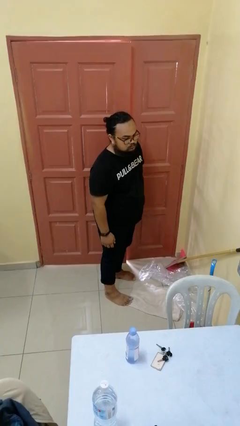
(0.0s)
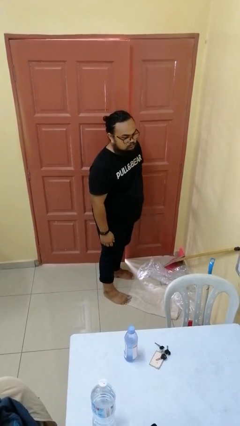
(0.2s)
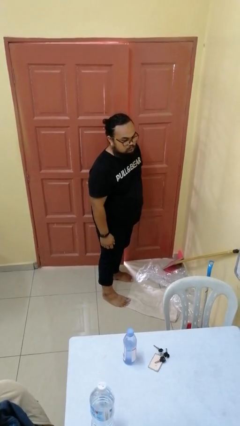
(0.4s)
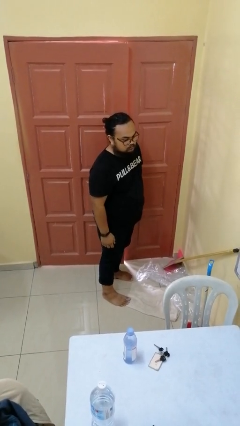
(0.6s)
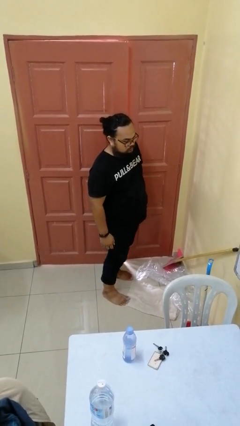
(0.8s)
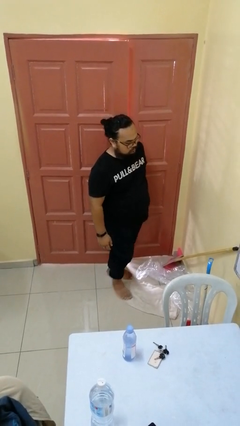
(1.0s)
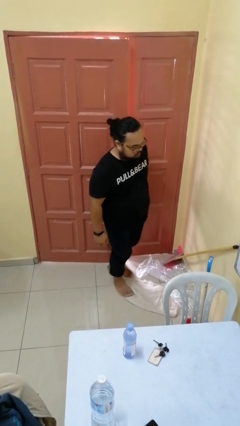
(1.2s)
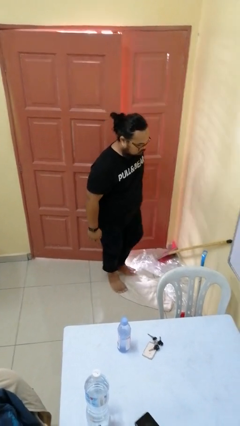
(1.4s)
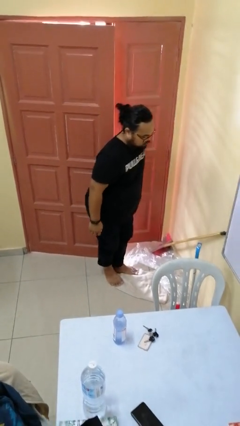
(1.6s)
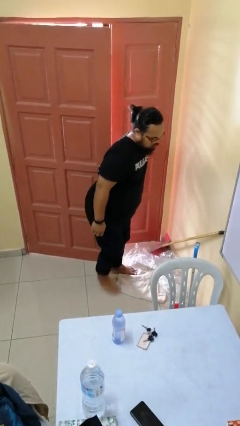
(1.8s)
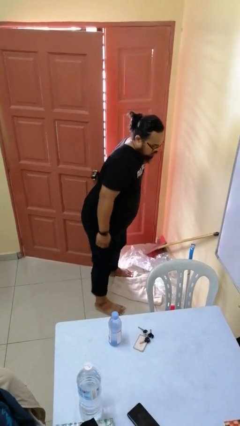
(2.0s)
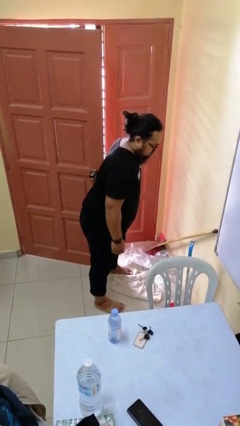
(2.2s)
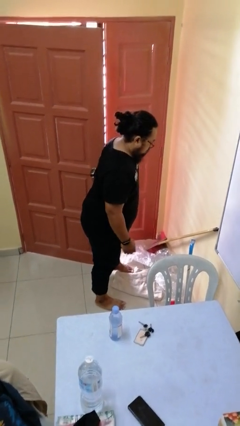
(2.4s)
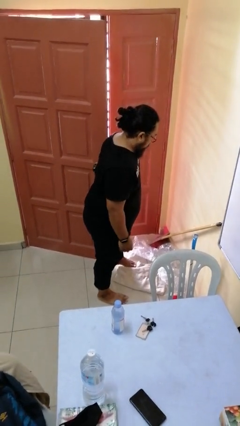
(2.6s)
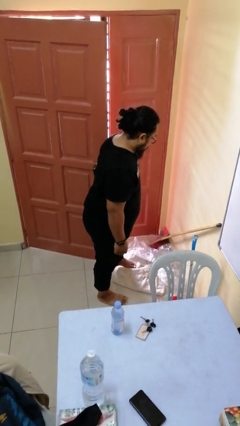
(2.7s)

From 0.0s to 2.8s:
person opens facility door

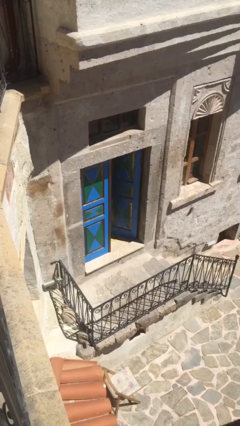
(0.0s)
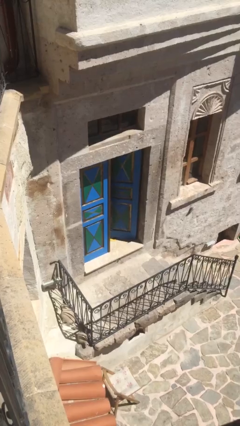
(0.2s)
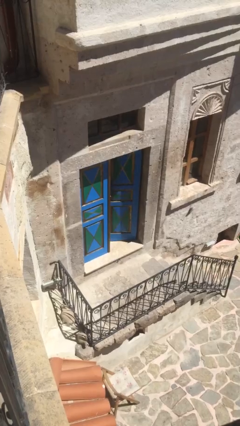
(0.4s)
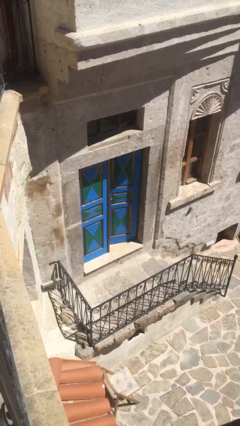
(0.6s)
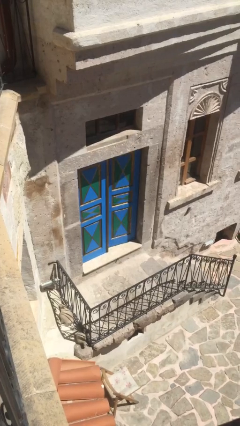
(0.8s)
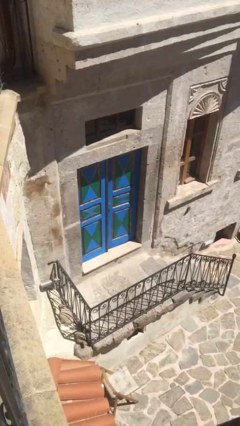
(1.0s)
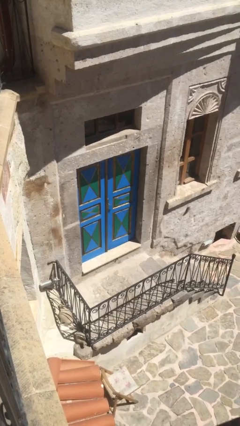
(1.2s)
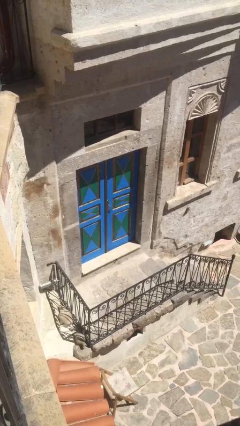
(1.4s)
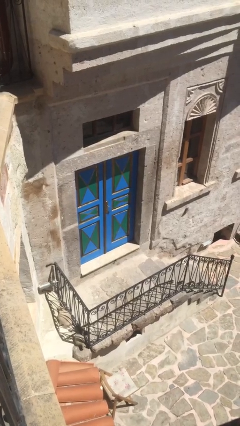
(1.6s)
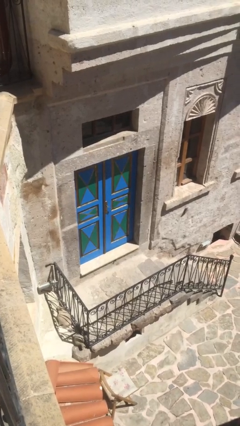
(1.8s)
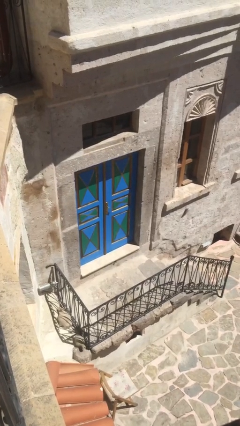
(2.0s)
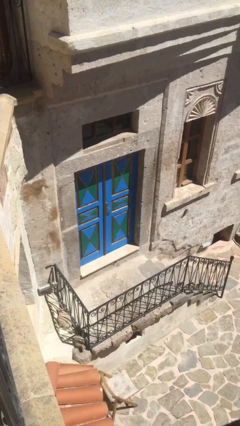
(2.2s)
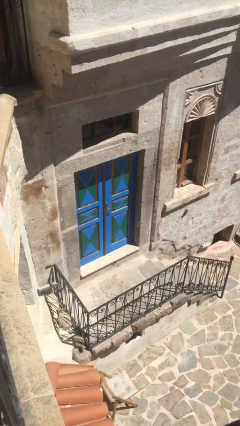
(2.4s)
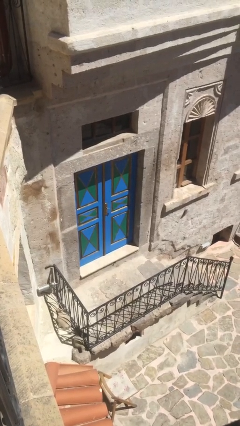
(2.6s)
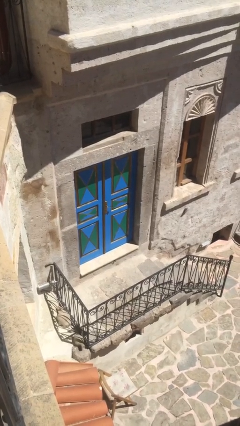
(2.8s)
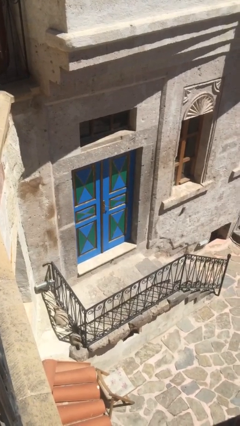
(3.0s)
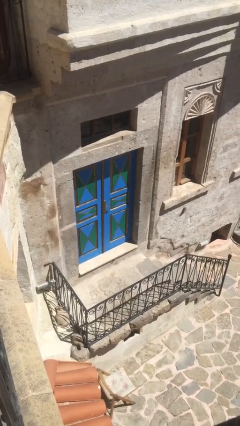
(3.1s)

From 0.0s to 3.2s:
person closes facility door

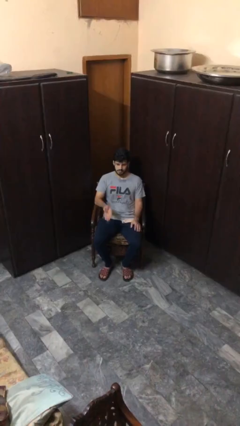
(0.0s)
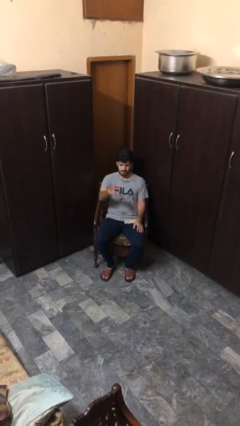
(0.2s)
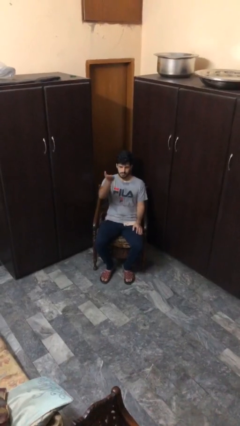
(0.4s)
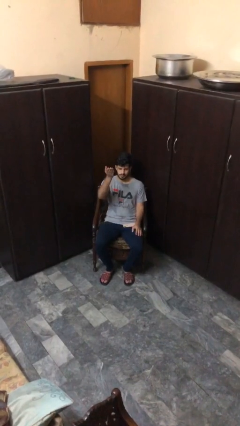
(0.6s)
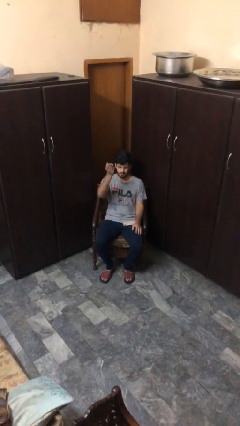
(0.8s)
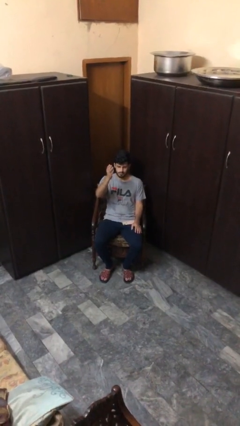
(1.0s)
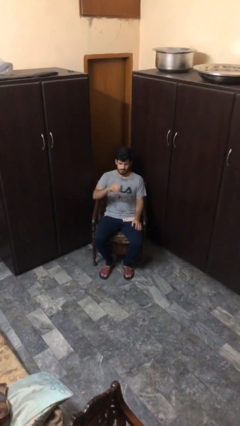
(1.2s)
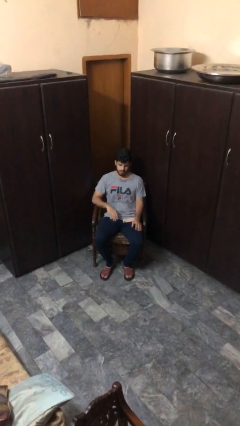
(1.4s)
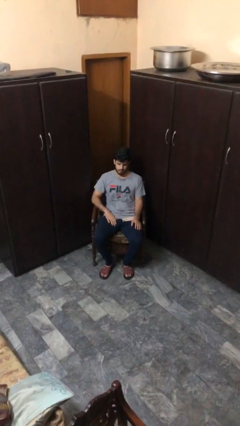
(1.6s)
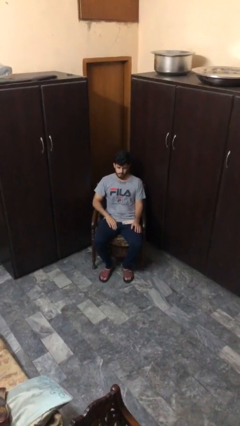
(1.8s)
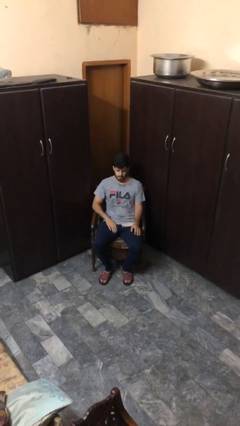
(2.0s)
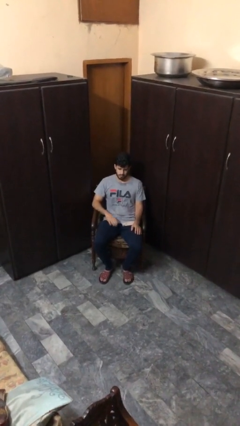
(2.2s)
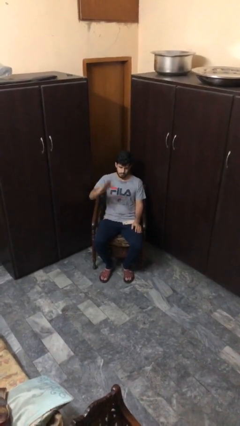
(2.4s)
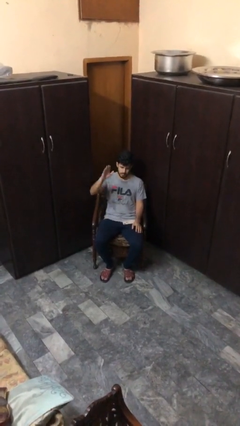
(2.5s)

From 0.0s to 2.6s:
person gestures swipe up

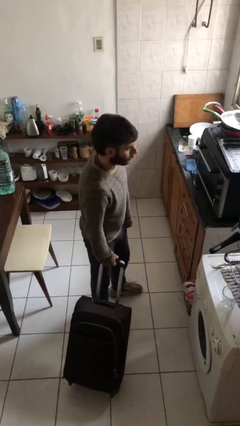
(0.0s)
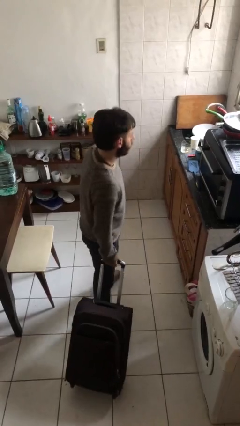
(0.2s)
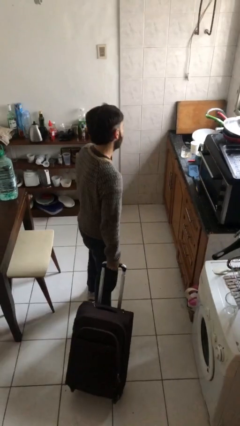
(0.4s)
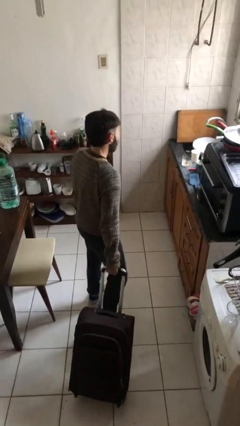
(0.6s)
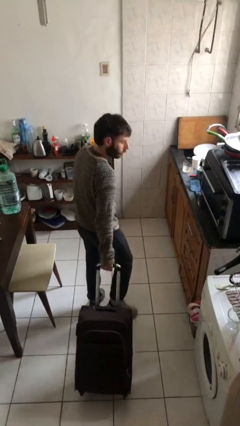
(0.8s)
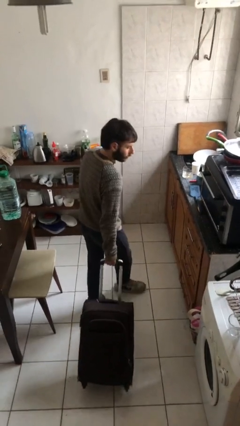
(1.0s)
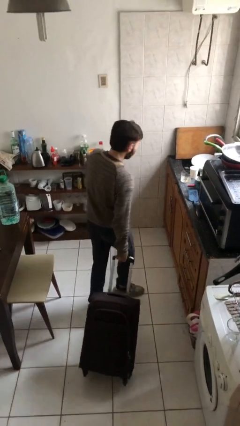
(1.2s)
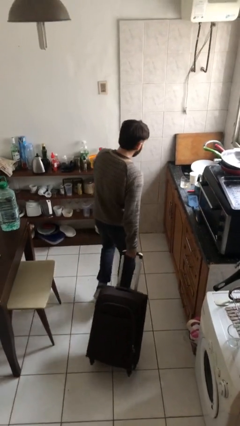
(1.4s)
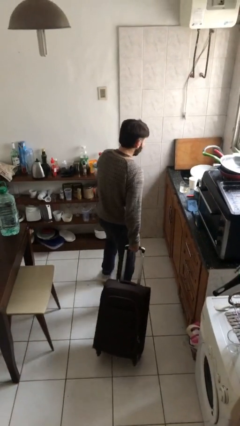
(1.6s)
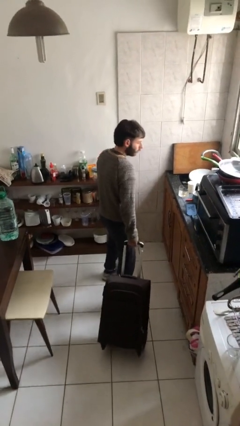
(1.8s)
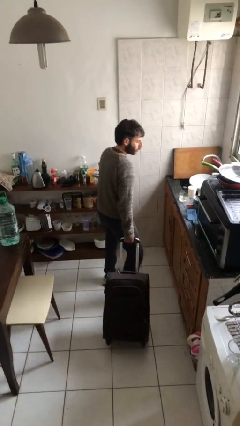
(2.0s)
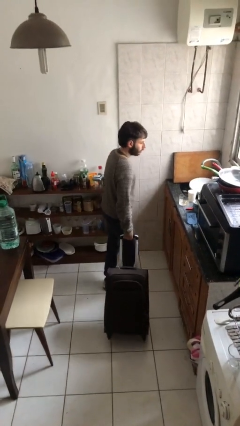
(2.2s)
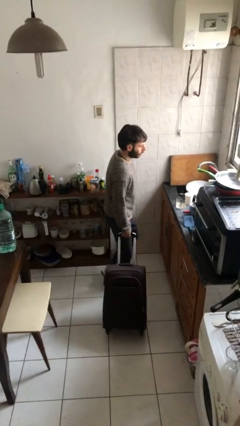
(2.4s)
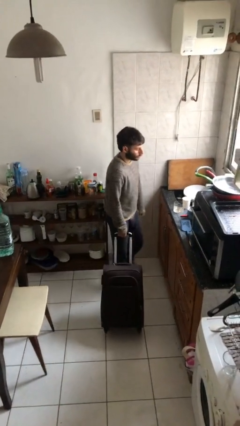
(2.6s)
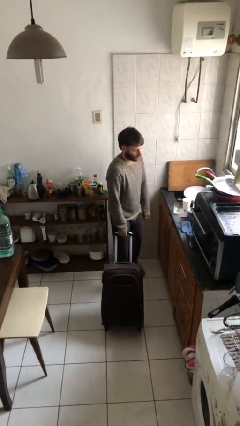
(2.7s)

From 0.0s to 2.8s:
person pulls wheeled cart

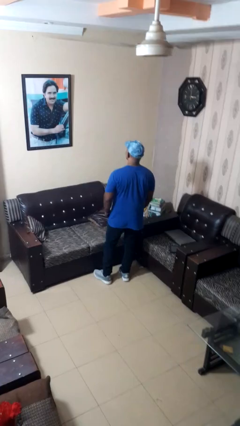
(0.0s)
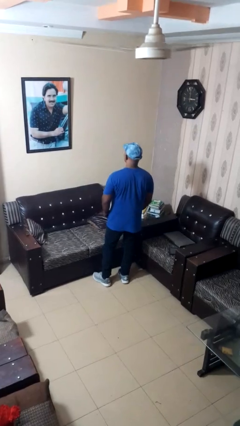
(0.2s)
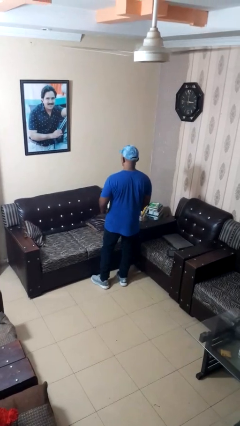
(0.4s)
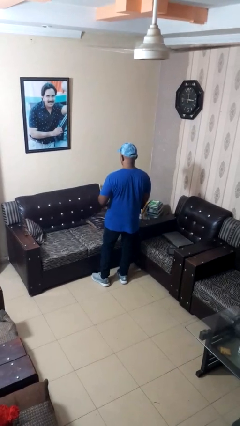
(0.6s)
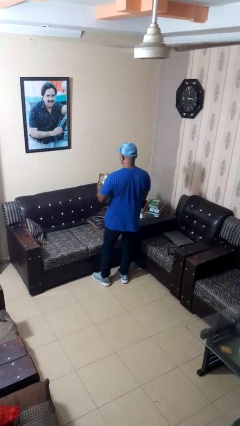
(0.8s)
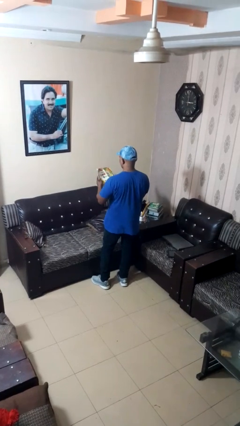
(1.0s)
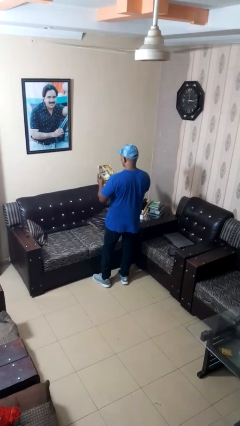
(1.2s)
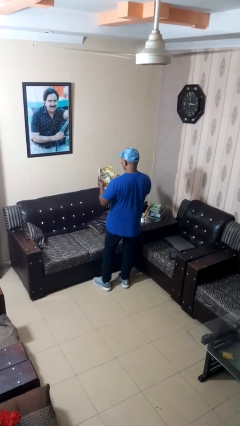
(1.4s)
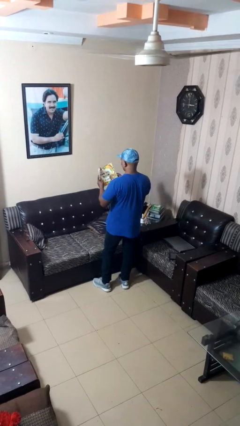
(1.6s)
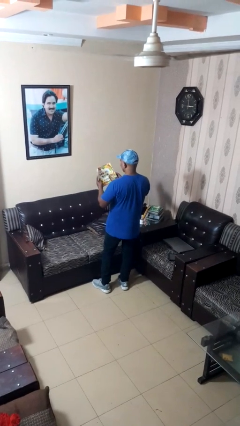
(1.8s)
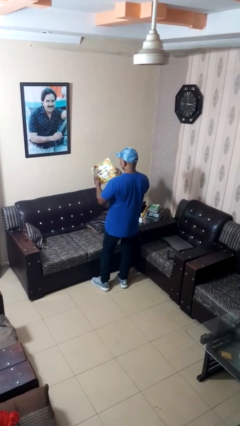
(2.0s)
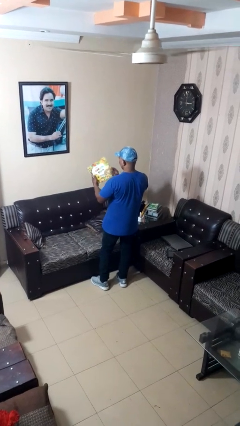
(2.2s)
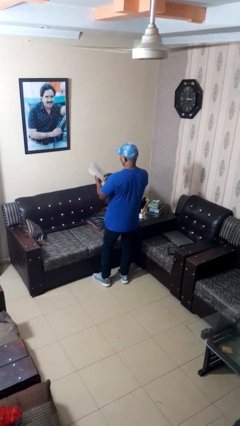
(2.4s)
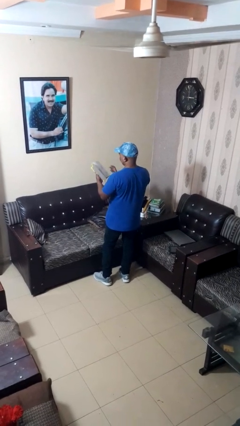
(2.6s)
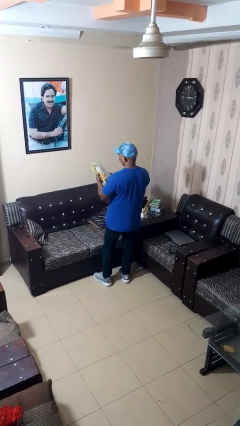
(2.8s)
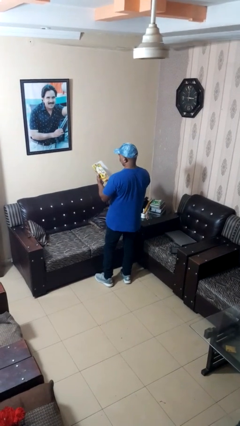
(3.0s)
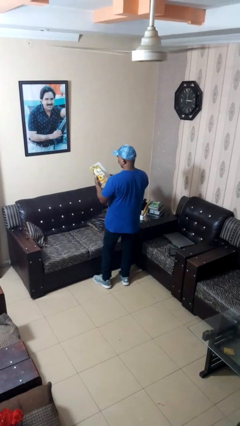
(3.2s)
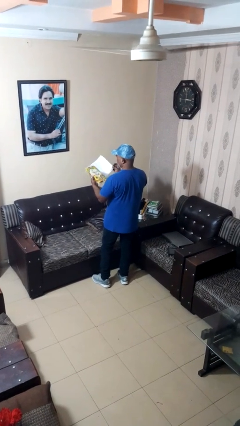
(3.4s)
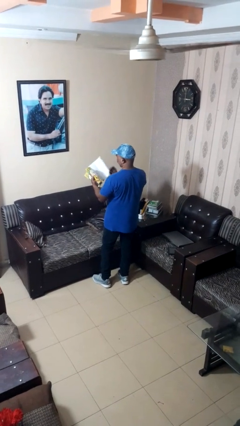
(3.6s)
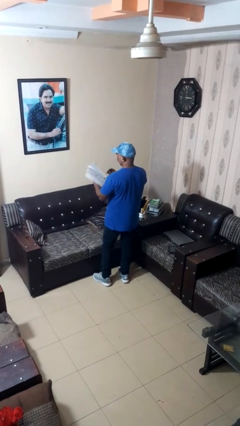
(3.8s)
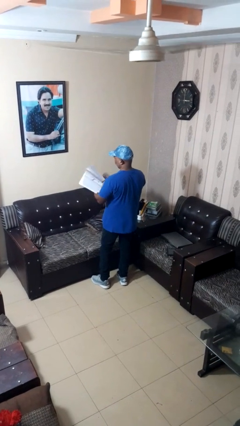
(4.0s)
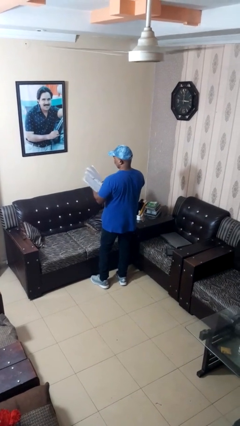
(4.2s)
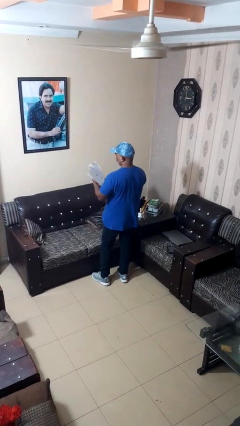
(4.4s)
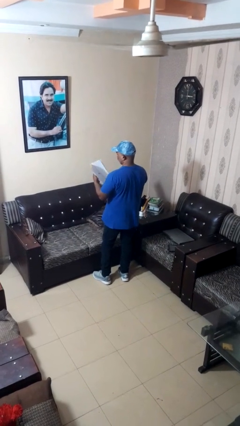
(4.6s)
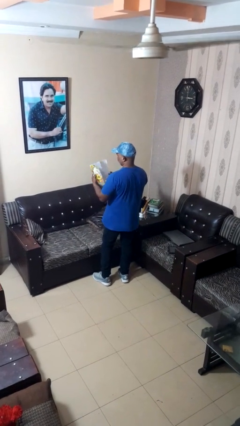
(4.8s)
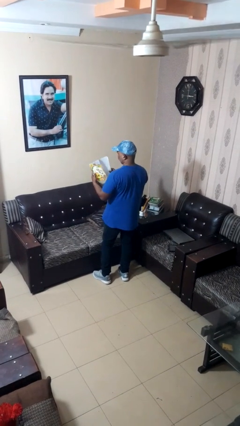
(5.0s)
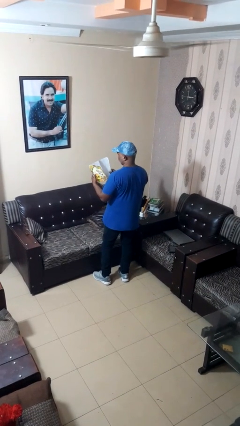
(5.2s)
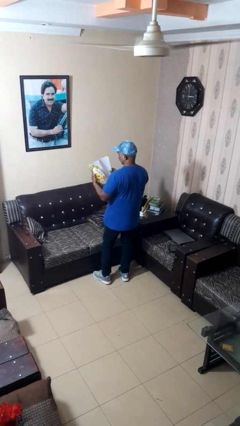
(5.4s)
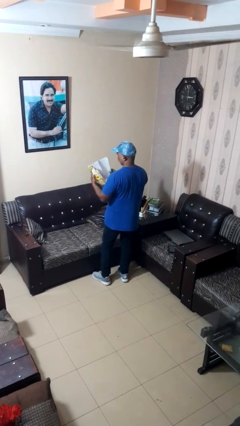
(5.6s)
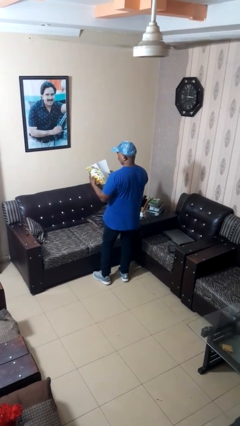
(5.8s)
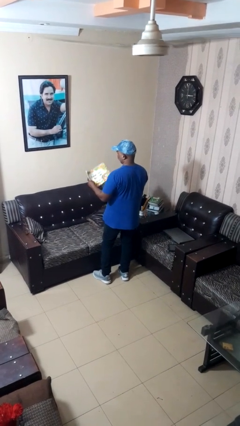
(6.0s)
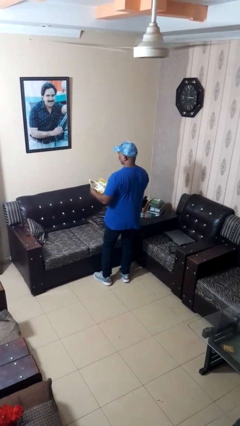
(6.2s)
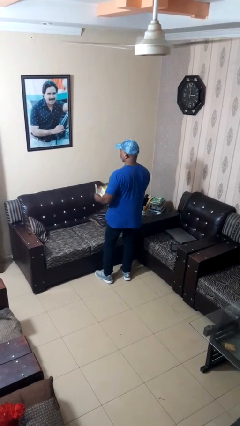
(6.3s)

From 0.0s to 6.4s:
person reads magazine
